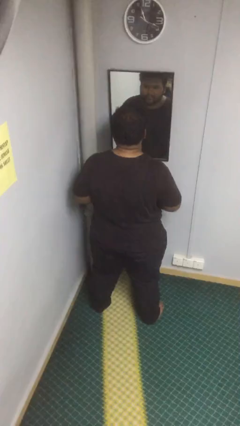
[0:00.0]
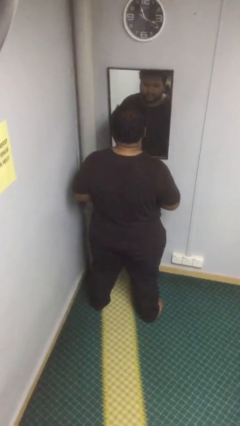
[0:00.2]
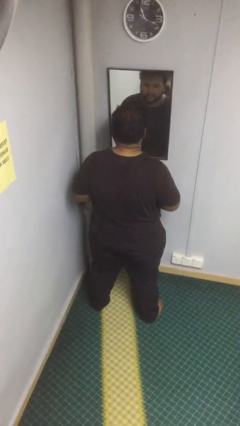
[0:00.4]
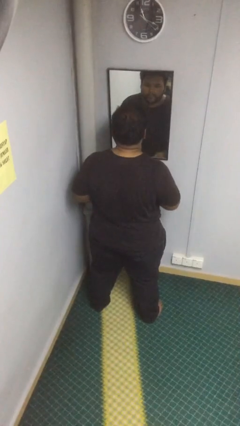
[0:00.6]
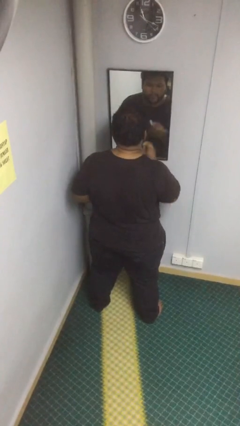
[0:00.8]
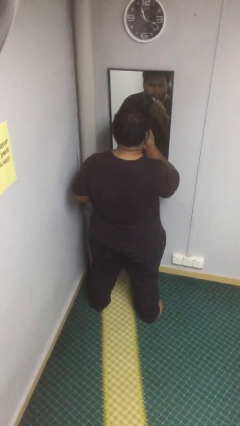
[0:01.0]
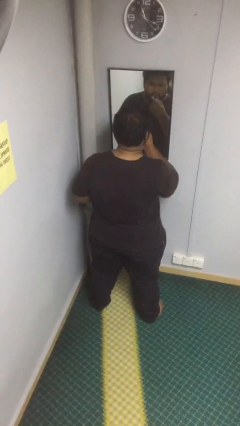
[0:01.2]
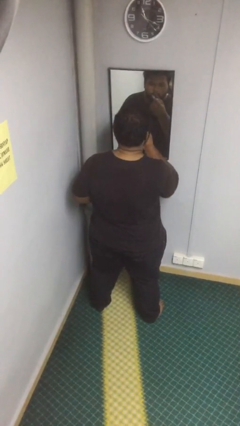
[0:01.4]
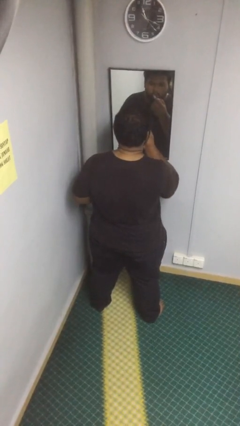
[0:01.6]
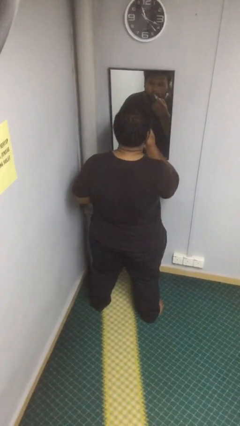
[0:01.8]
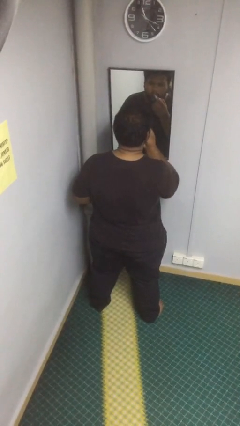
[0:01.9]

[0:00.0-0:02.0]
person applies lip makeup

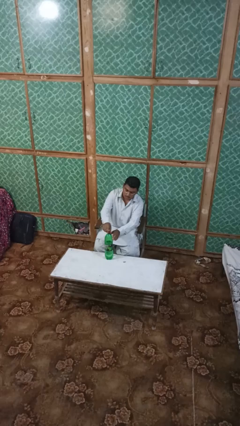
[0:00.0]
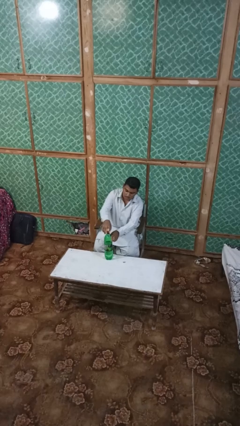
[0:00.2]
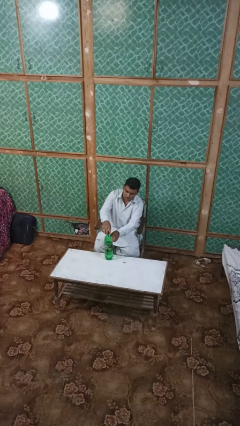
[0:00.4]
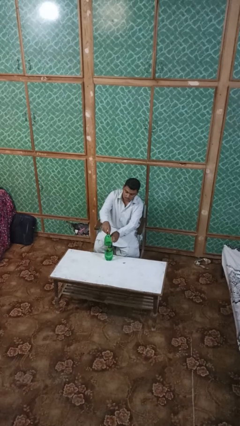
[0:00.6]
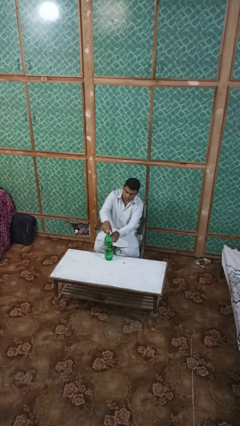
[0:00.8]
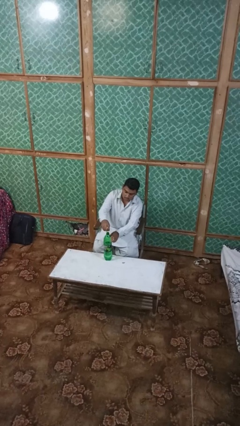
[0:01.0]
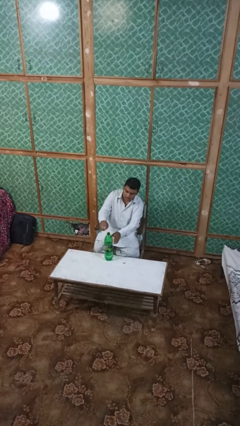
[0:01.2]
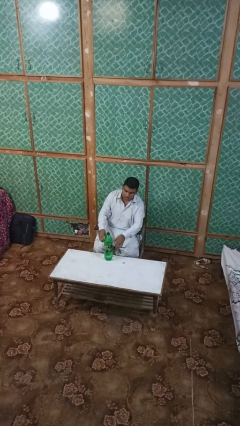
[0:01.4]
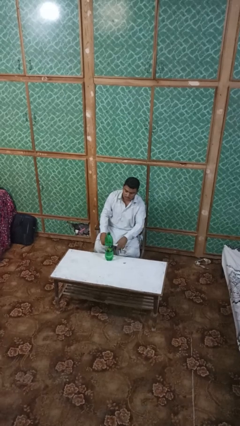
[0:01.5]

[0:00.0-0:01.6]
person unscrews lid from bottle

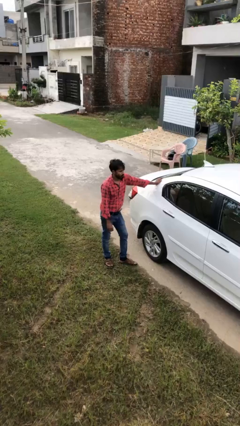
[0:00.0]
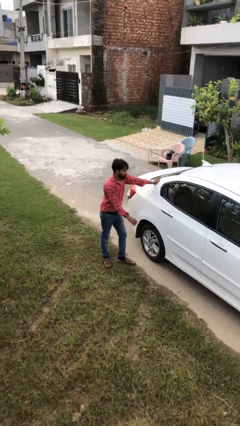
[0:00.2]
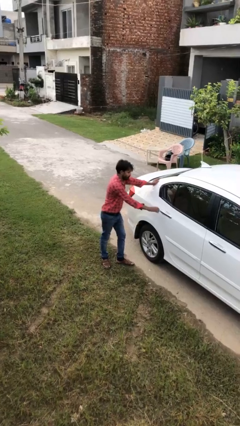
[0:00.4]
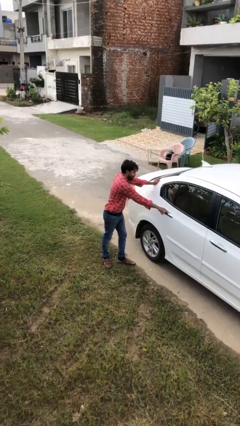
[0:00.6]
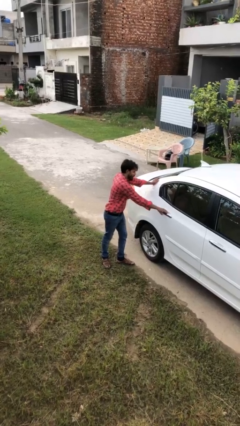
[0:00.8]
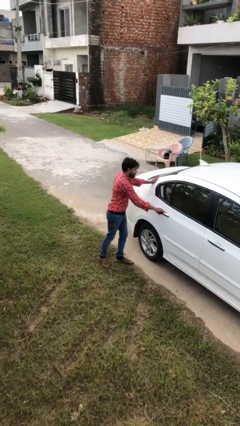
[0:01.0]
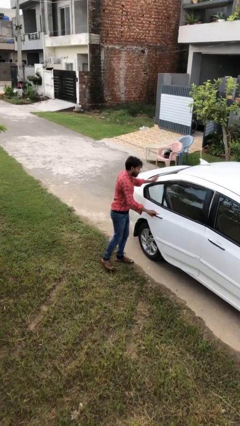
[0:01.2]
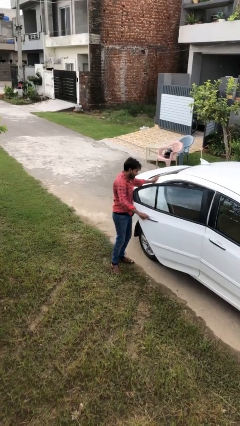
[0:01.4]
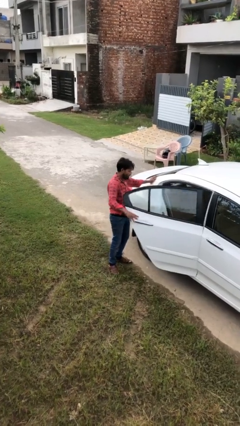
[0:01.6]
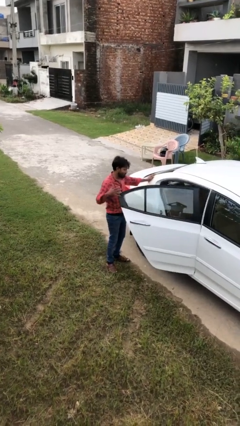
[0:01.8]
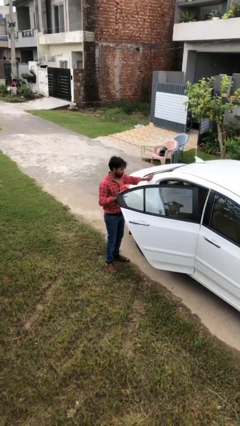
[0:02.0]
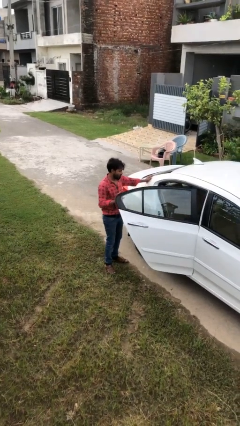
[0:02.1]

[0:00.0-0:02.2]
person opens car door

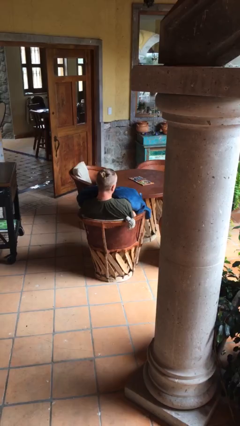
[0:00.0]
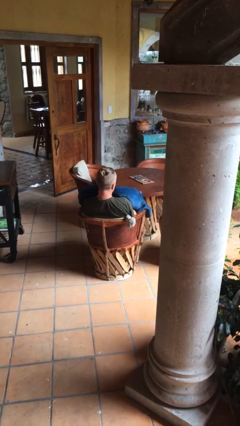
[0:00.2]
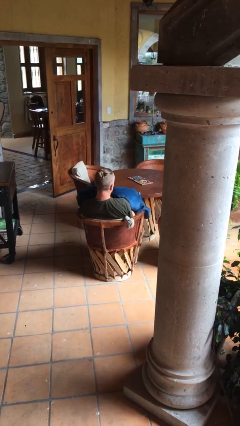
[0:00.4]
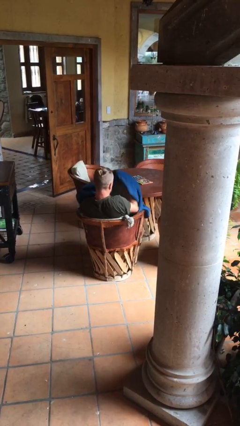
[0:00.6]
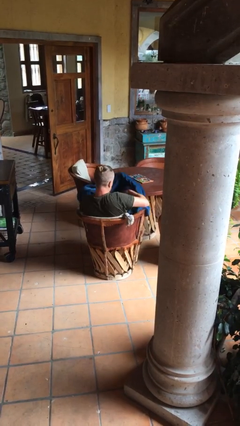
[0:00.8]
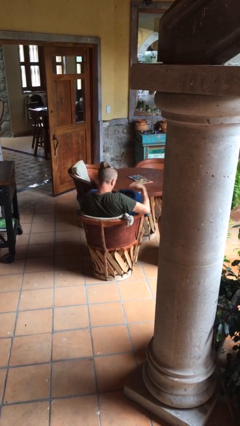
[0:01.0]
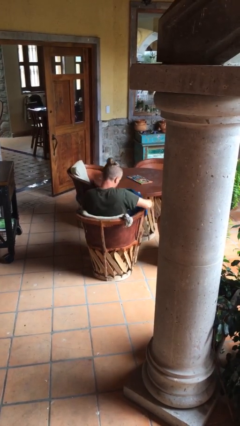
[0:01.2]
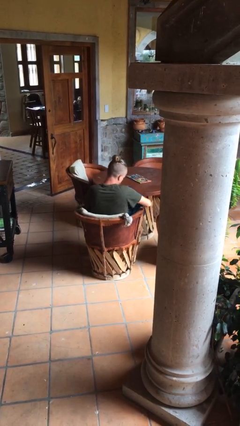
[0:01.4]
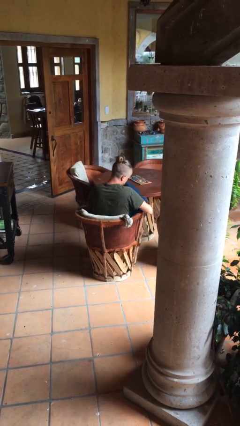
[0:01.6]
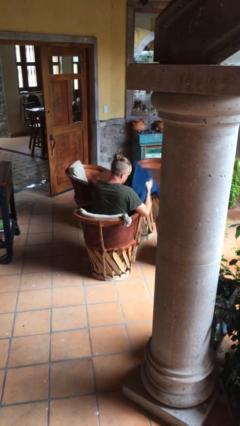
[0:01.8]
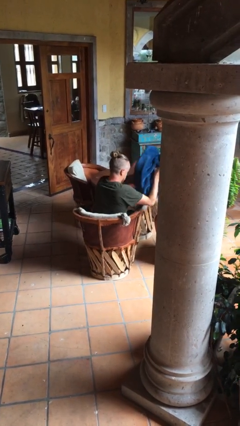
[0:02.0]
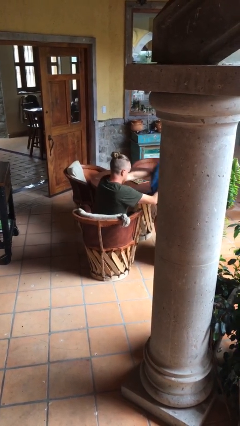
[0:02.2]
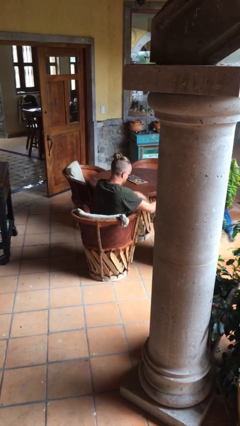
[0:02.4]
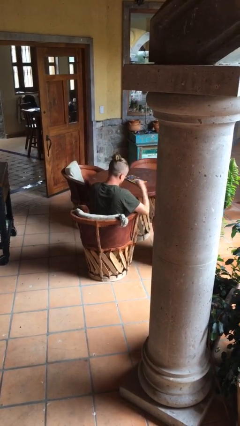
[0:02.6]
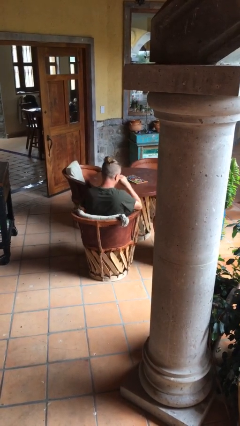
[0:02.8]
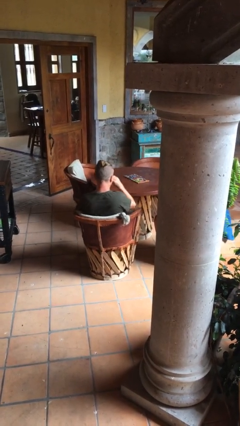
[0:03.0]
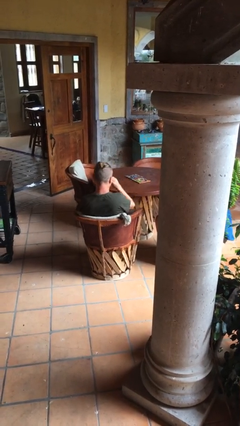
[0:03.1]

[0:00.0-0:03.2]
person uncovers with blanket

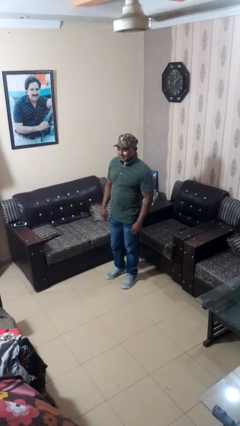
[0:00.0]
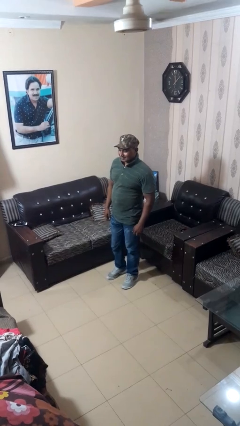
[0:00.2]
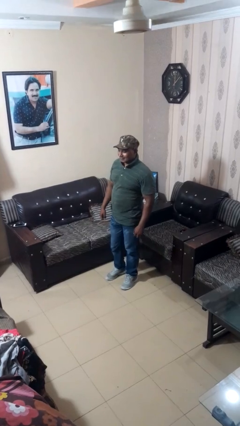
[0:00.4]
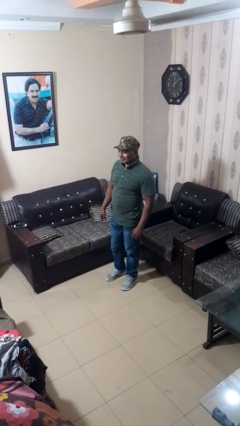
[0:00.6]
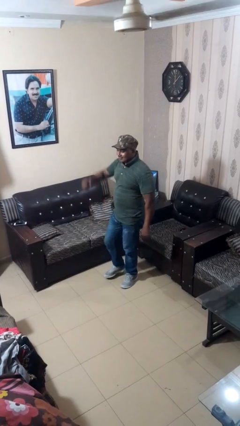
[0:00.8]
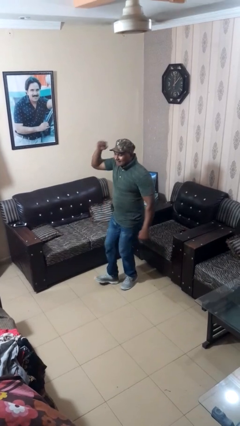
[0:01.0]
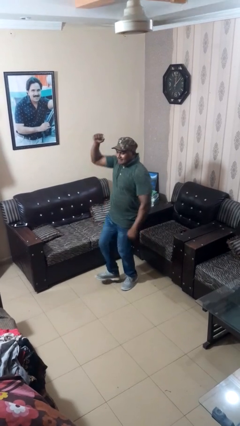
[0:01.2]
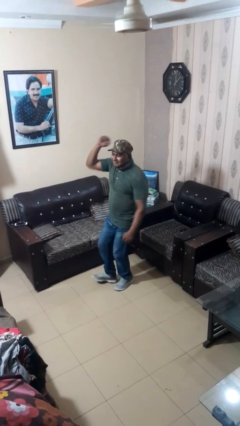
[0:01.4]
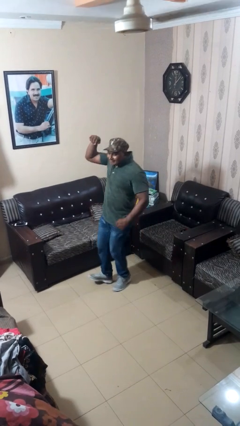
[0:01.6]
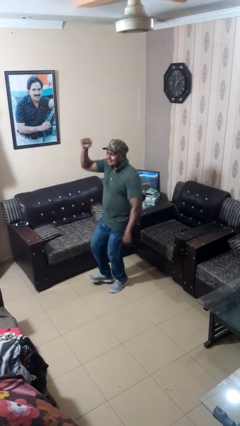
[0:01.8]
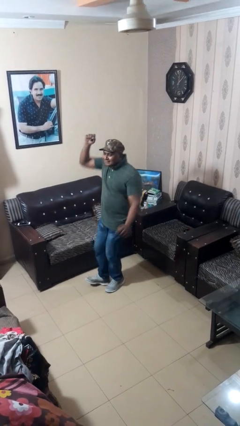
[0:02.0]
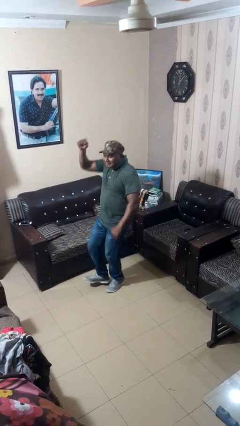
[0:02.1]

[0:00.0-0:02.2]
person dances in place

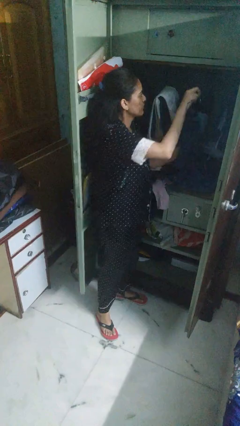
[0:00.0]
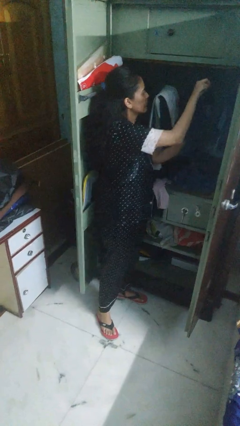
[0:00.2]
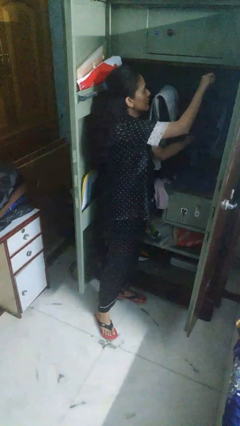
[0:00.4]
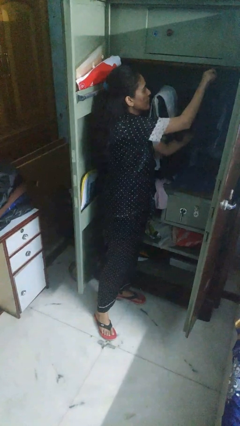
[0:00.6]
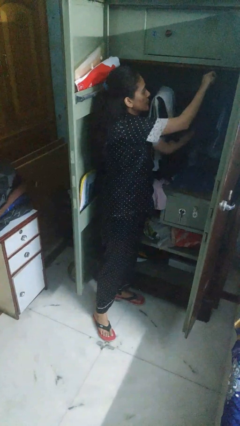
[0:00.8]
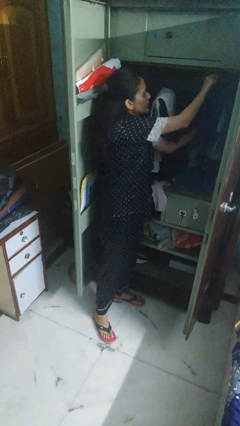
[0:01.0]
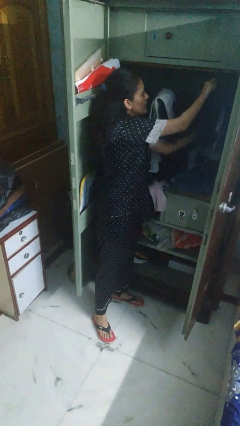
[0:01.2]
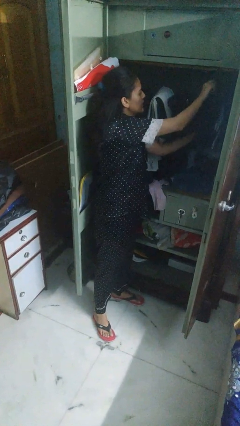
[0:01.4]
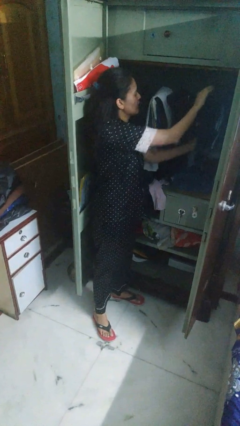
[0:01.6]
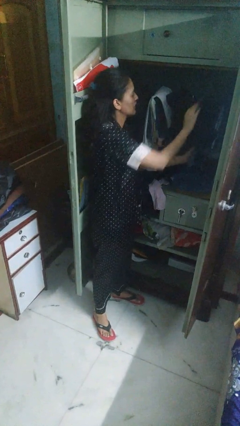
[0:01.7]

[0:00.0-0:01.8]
person puts clothes into closet

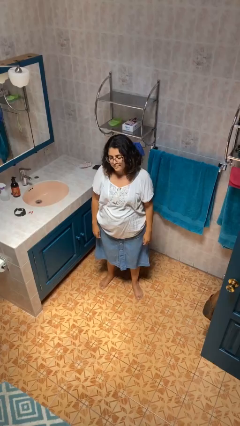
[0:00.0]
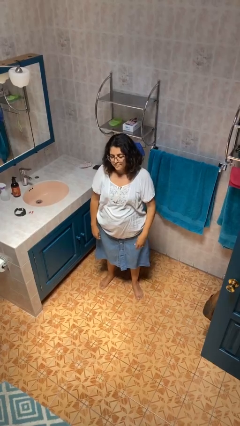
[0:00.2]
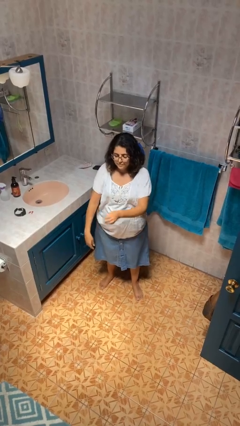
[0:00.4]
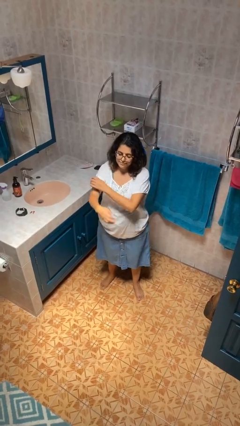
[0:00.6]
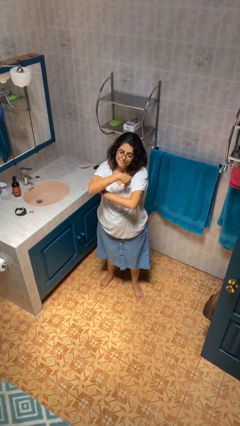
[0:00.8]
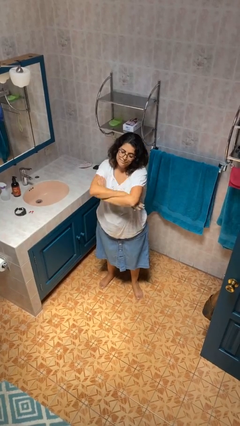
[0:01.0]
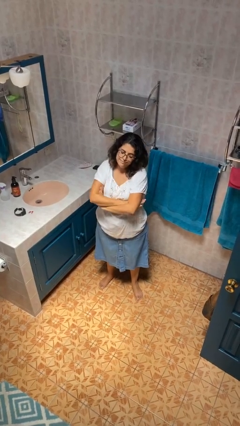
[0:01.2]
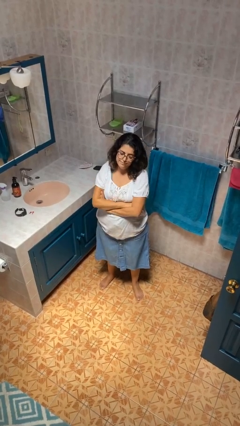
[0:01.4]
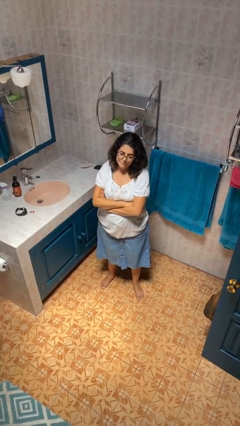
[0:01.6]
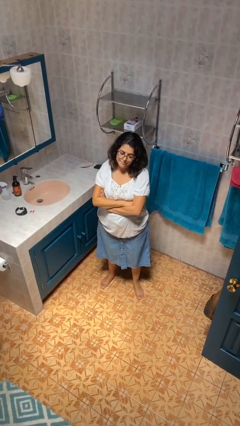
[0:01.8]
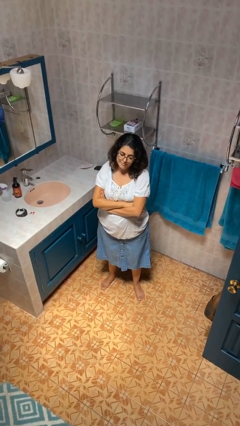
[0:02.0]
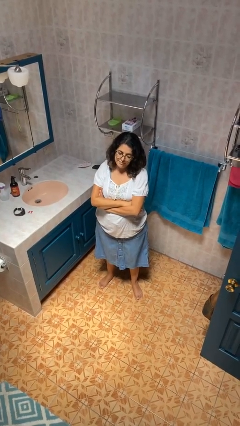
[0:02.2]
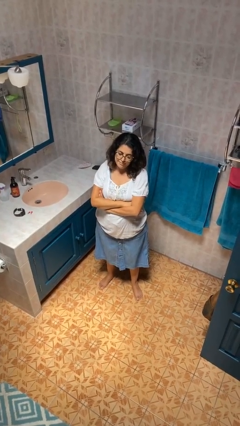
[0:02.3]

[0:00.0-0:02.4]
person crosses arms

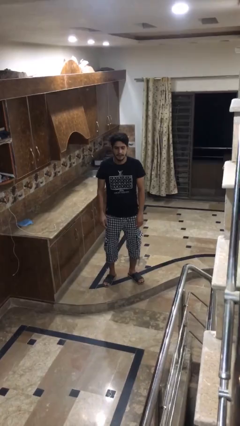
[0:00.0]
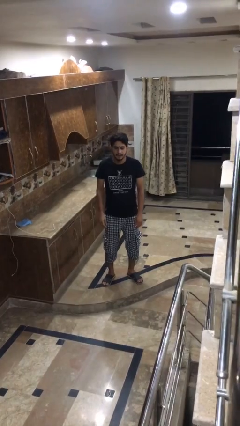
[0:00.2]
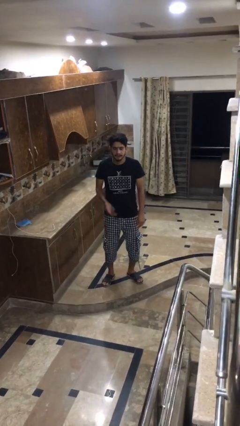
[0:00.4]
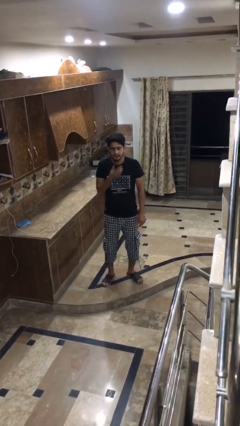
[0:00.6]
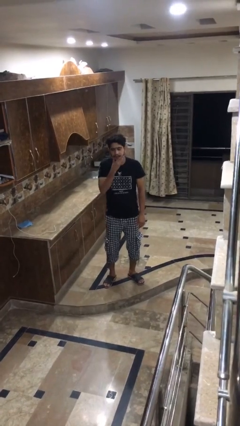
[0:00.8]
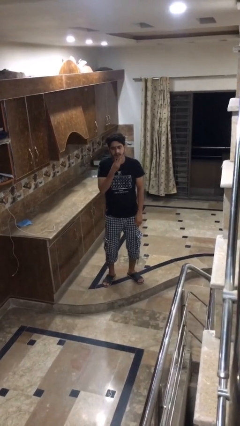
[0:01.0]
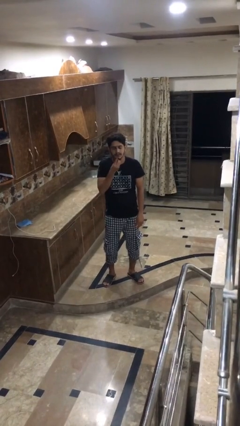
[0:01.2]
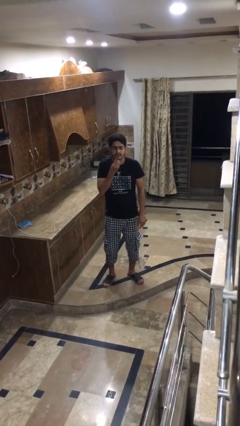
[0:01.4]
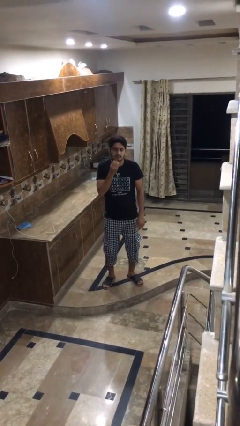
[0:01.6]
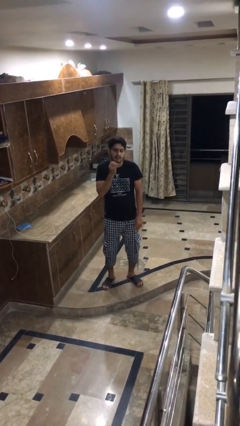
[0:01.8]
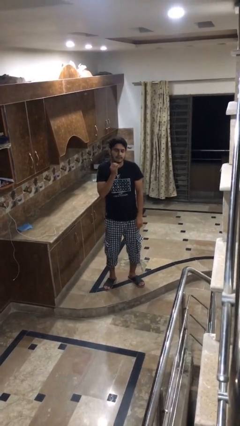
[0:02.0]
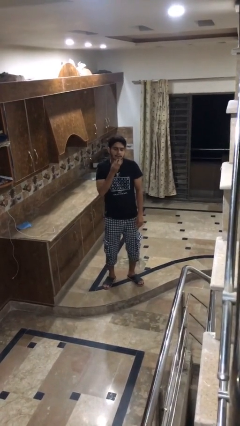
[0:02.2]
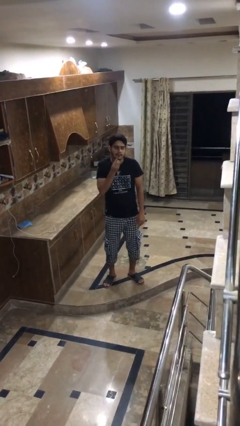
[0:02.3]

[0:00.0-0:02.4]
person strokes chin
